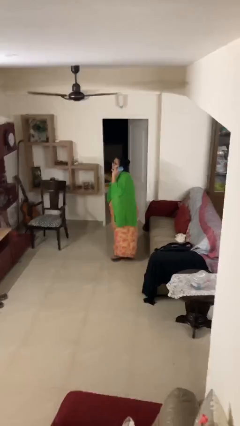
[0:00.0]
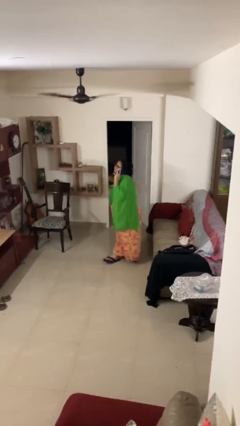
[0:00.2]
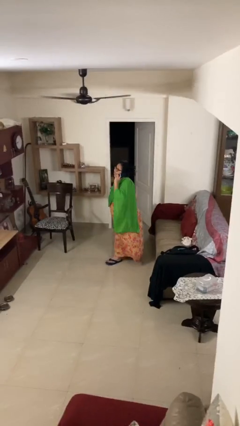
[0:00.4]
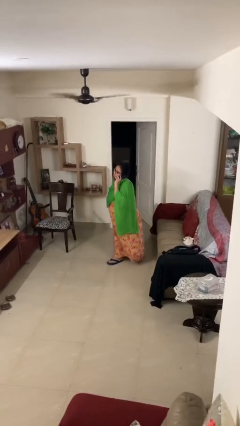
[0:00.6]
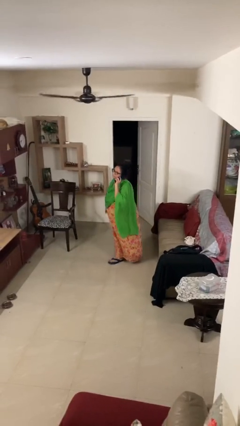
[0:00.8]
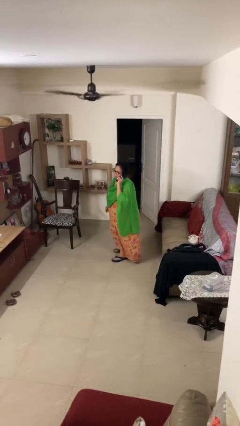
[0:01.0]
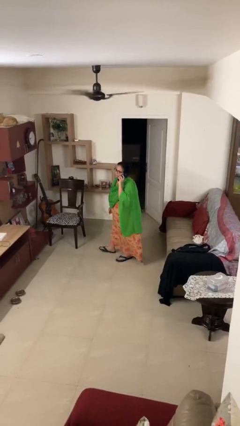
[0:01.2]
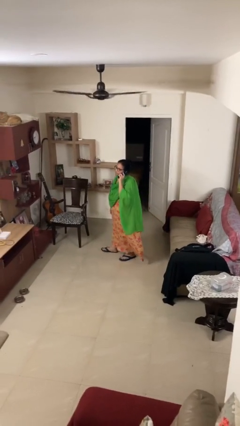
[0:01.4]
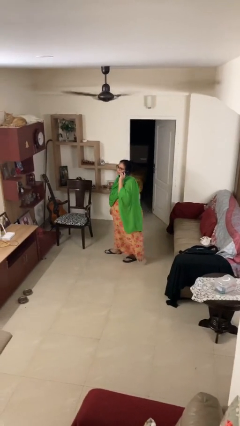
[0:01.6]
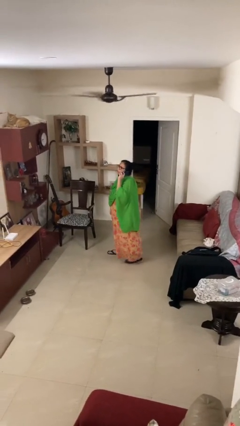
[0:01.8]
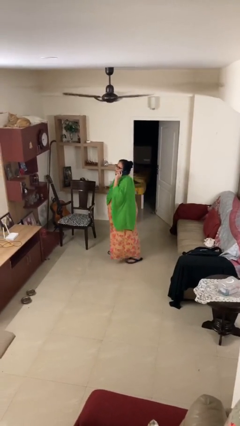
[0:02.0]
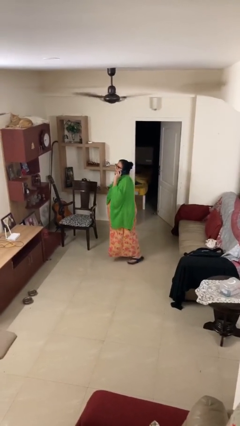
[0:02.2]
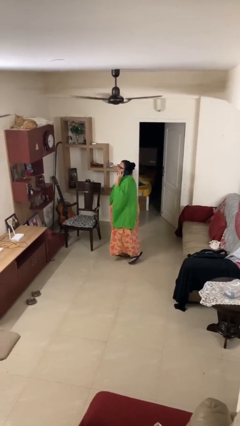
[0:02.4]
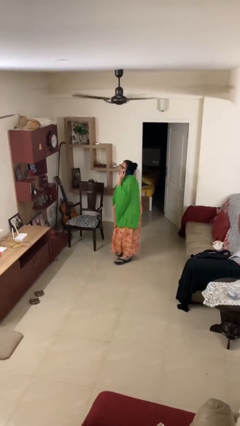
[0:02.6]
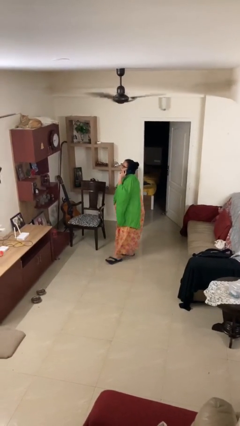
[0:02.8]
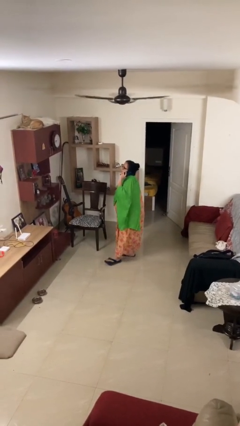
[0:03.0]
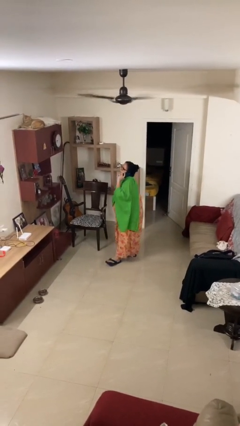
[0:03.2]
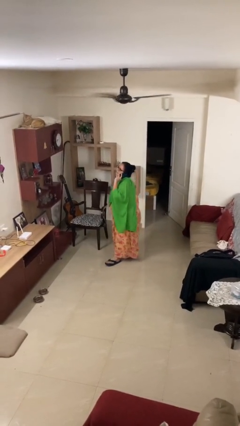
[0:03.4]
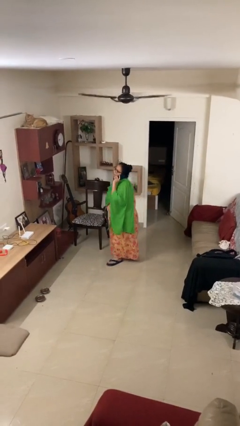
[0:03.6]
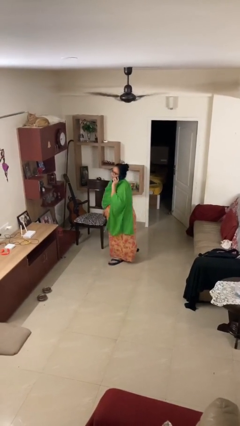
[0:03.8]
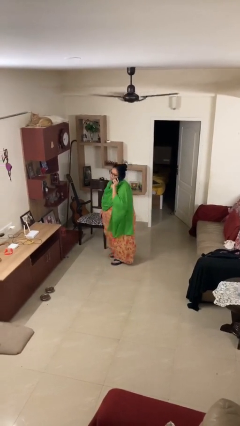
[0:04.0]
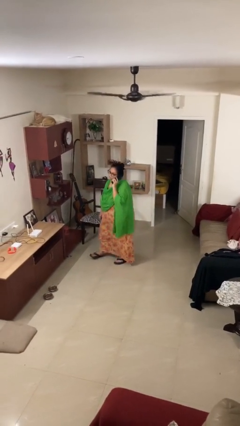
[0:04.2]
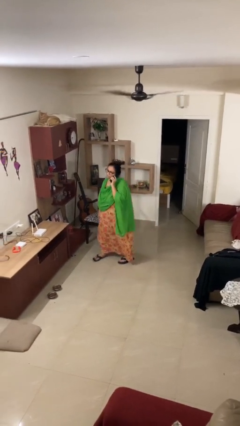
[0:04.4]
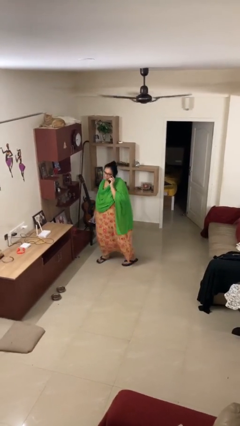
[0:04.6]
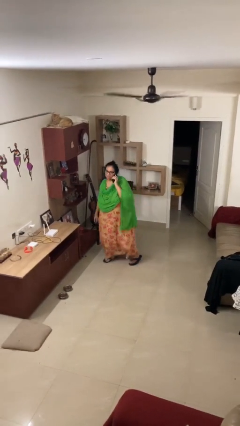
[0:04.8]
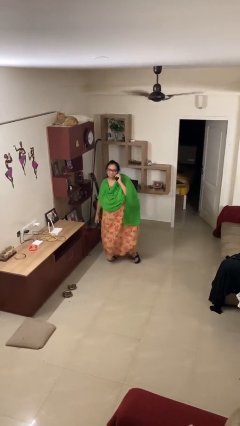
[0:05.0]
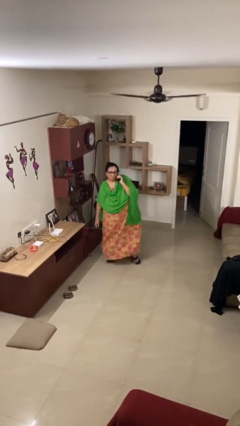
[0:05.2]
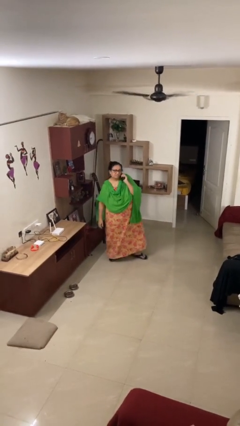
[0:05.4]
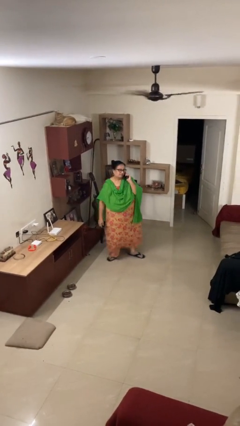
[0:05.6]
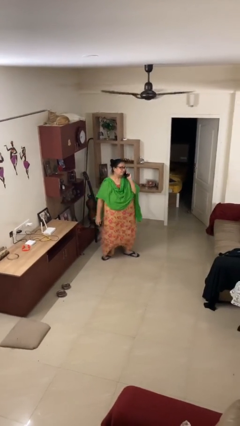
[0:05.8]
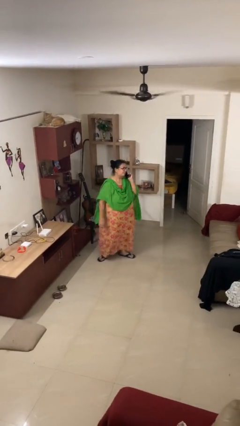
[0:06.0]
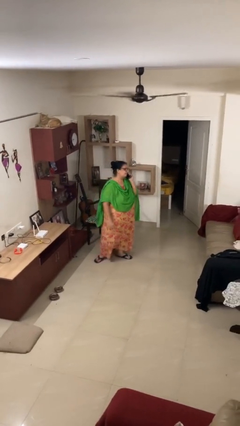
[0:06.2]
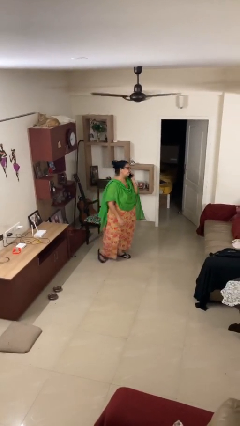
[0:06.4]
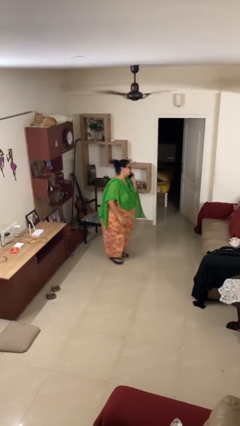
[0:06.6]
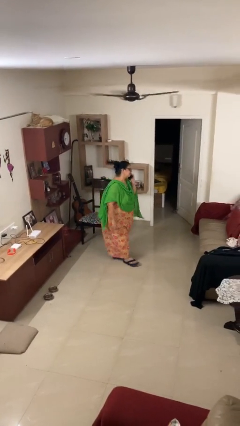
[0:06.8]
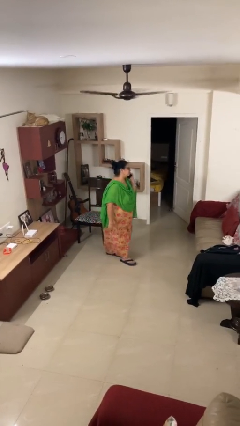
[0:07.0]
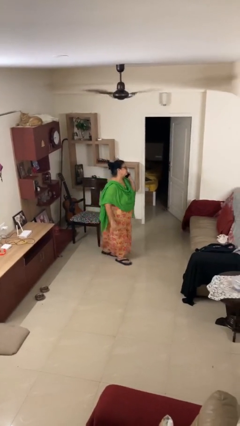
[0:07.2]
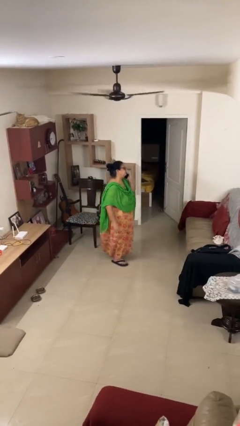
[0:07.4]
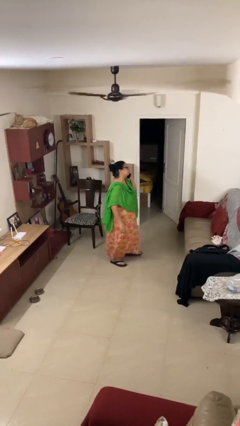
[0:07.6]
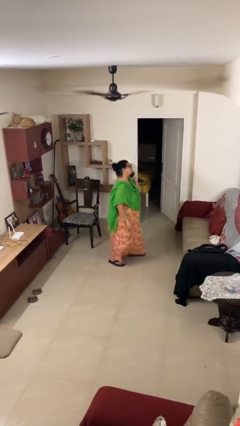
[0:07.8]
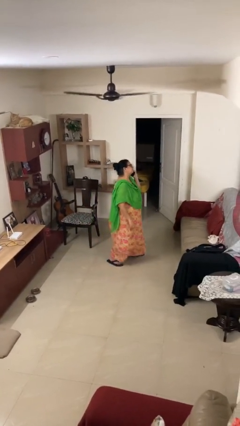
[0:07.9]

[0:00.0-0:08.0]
person talks on phone

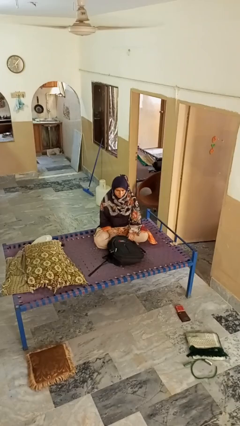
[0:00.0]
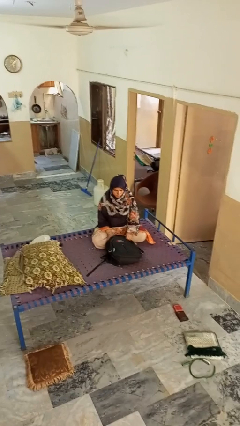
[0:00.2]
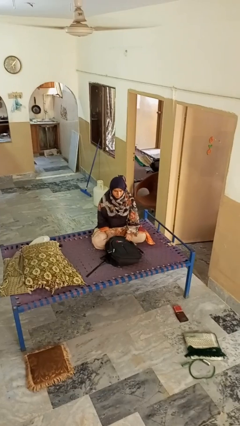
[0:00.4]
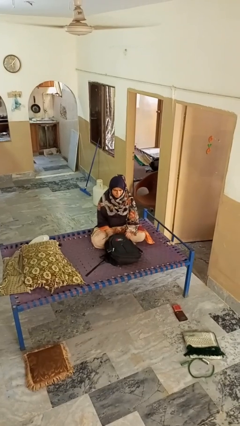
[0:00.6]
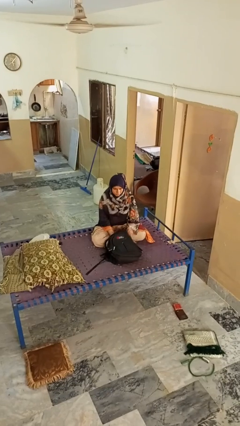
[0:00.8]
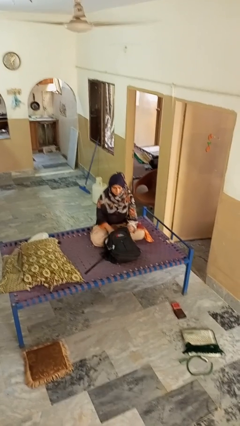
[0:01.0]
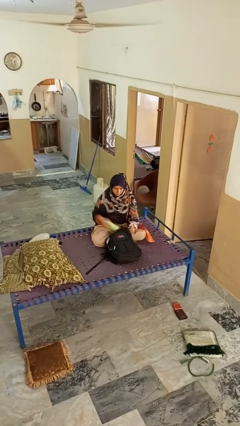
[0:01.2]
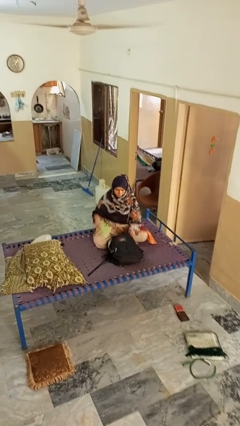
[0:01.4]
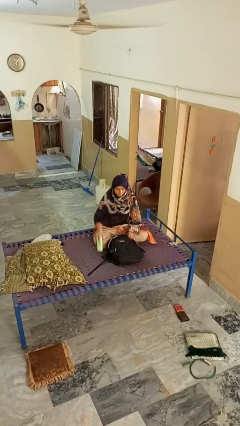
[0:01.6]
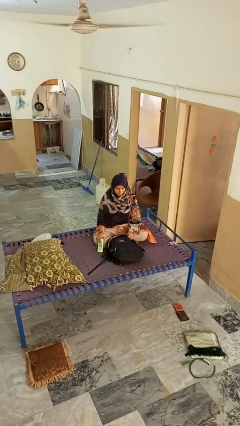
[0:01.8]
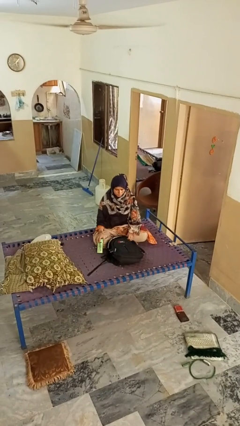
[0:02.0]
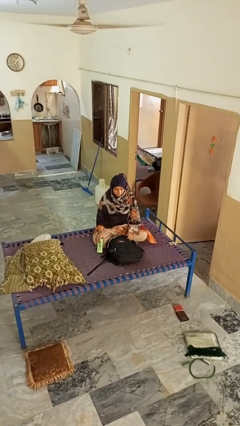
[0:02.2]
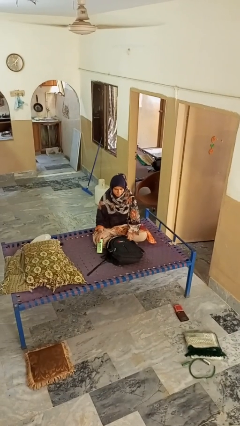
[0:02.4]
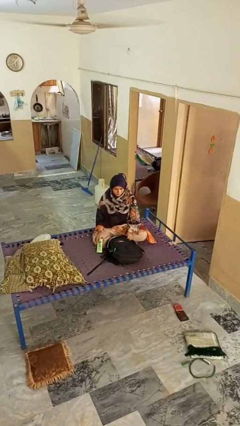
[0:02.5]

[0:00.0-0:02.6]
person takes object from bag

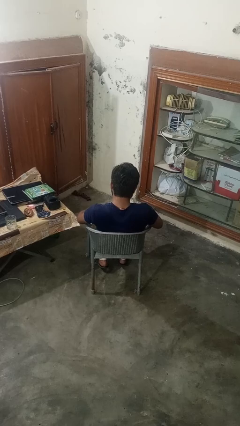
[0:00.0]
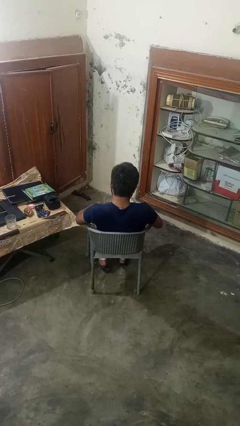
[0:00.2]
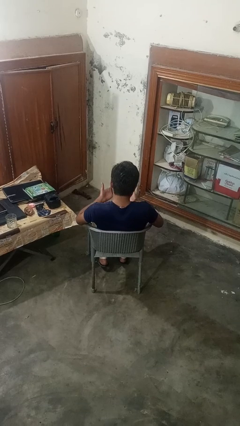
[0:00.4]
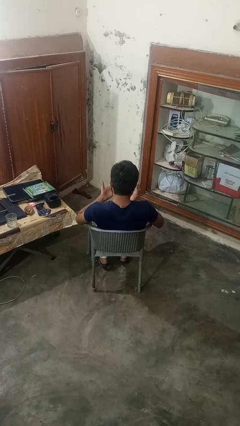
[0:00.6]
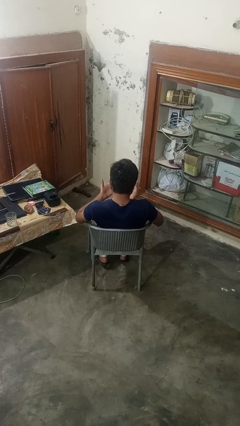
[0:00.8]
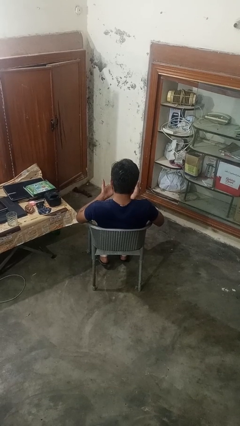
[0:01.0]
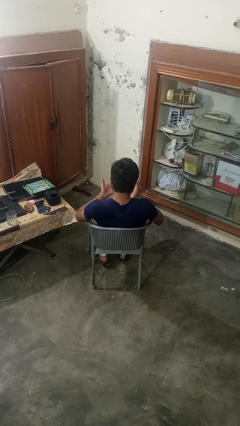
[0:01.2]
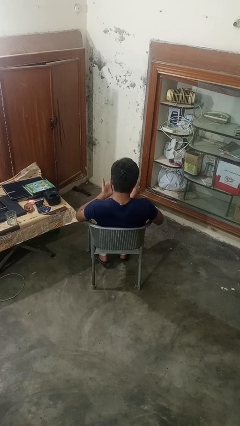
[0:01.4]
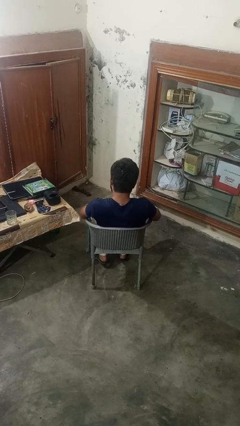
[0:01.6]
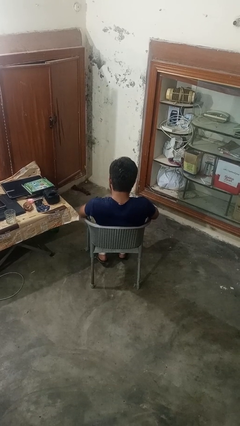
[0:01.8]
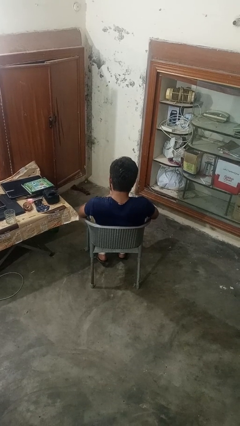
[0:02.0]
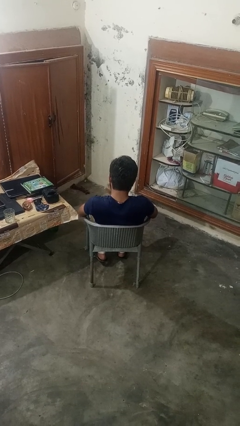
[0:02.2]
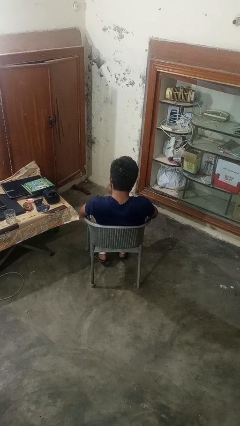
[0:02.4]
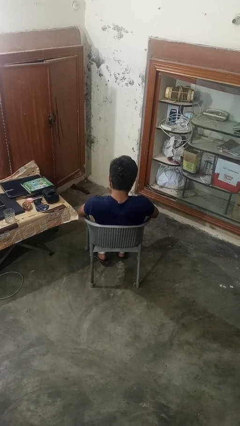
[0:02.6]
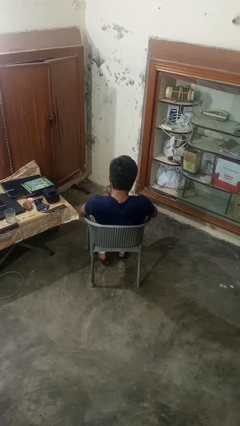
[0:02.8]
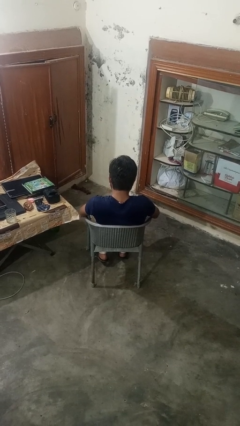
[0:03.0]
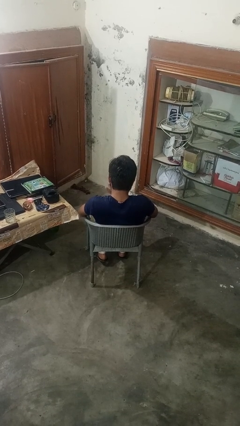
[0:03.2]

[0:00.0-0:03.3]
person looks at hands in lap

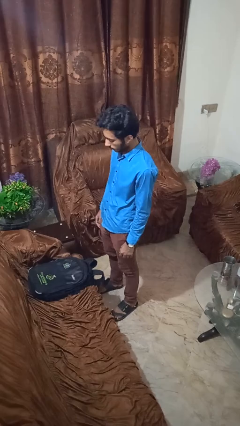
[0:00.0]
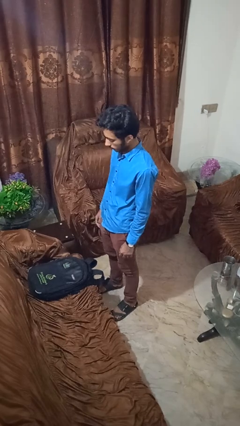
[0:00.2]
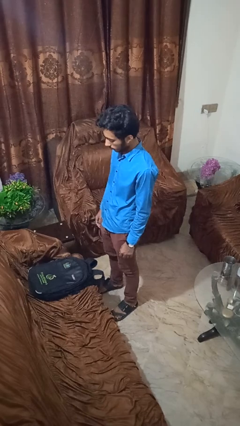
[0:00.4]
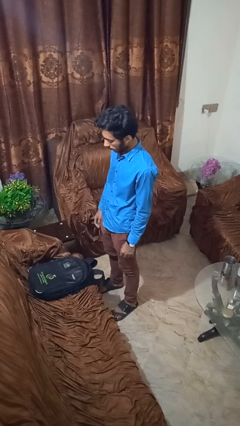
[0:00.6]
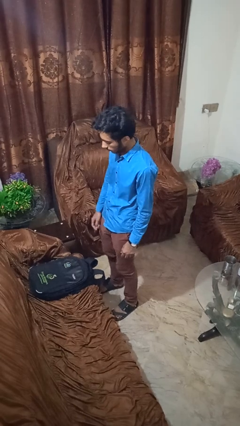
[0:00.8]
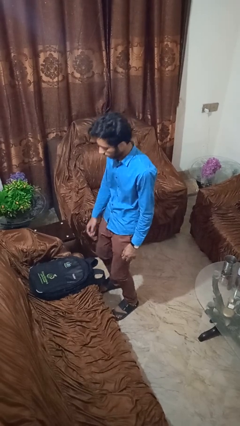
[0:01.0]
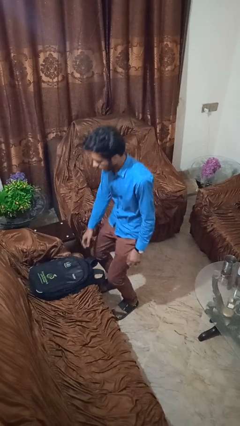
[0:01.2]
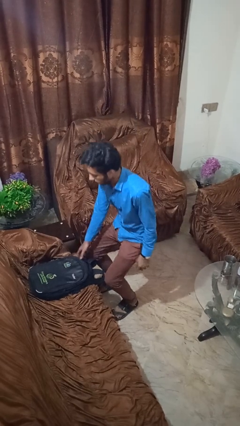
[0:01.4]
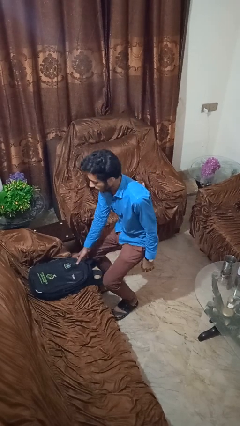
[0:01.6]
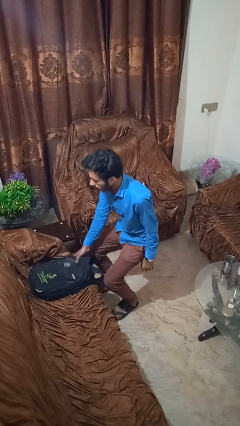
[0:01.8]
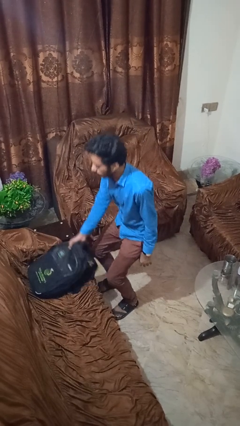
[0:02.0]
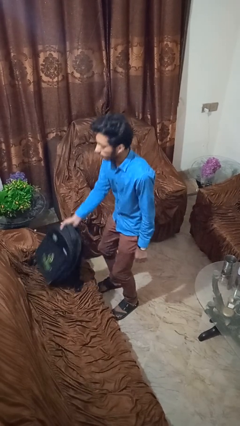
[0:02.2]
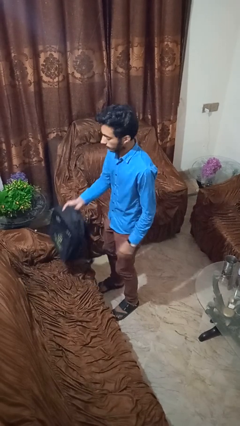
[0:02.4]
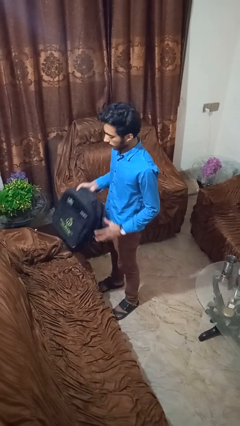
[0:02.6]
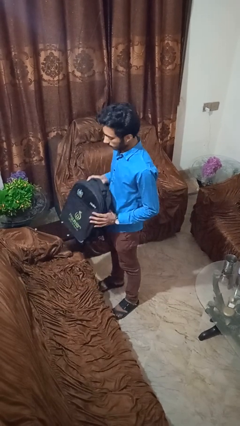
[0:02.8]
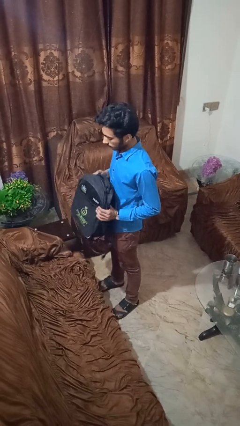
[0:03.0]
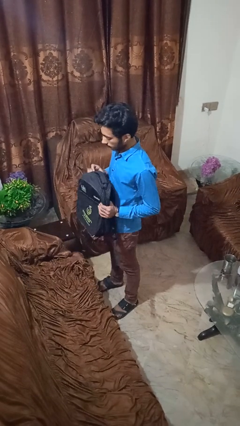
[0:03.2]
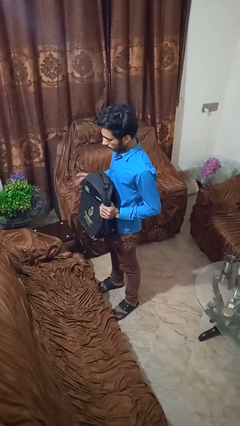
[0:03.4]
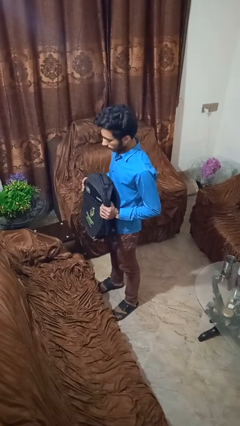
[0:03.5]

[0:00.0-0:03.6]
person picks up object from couch
